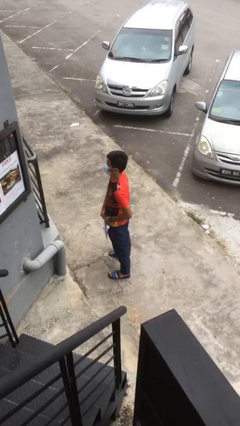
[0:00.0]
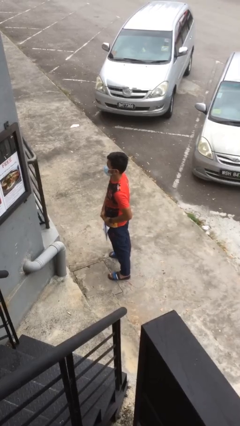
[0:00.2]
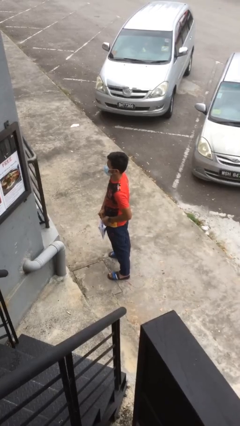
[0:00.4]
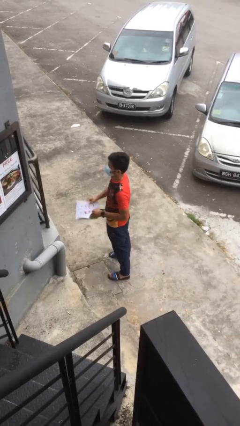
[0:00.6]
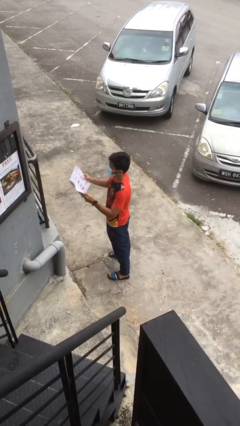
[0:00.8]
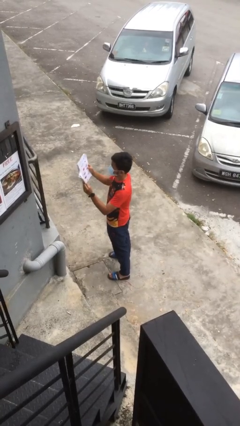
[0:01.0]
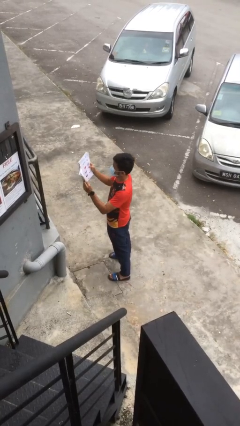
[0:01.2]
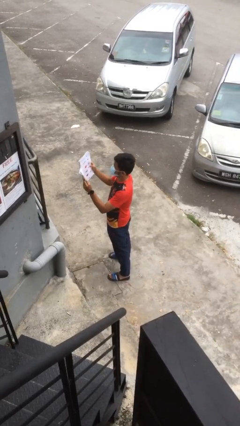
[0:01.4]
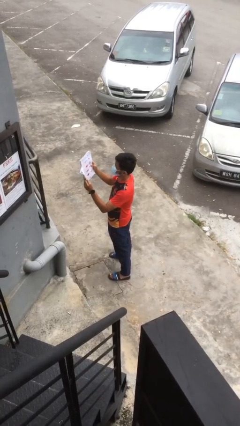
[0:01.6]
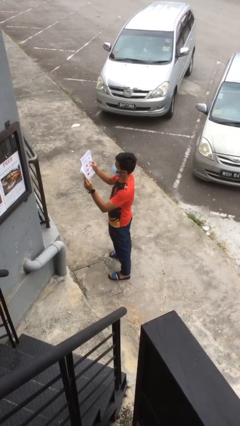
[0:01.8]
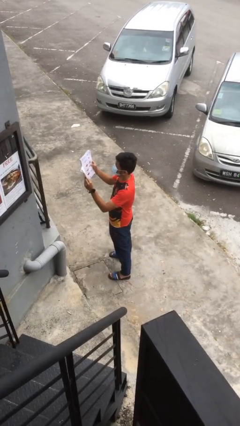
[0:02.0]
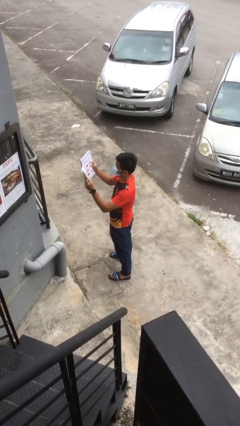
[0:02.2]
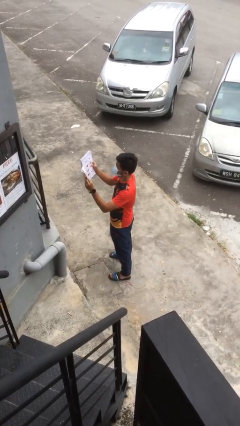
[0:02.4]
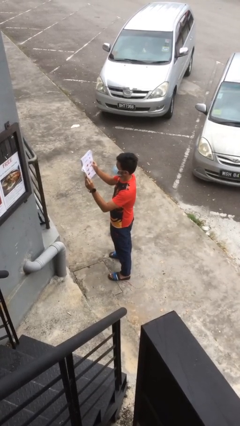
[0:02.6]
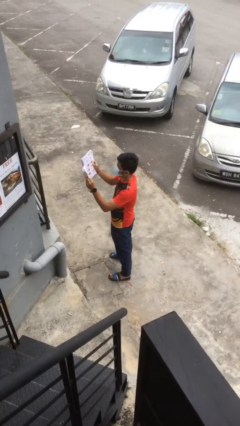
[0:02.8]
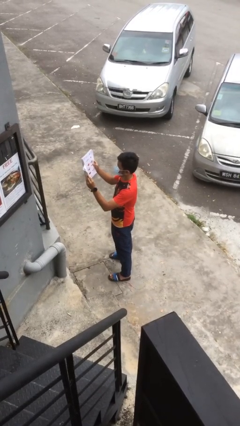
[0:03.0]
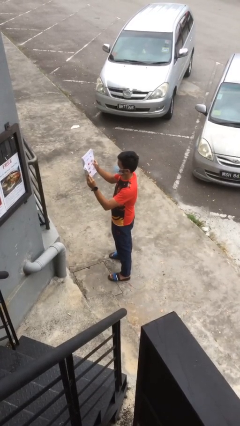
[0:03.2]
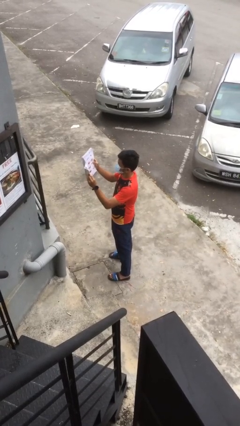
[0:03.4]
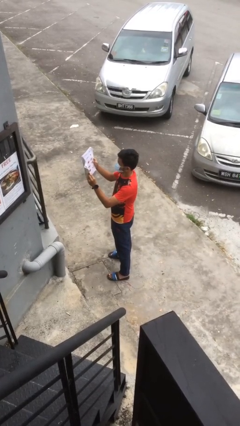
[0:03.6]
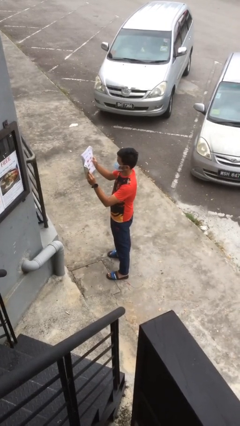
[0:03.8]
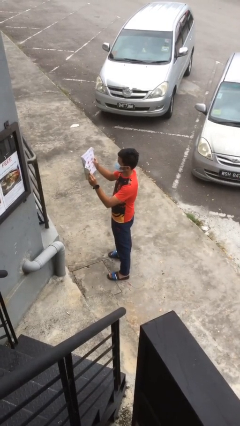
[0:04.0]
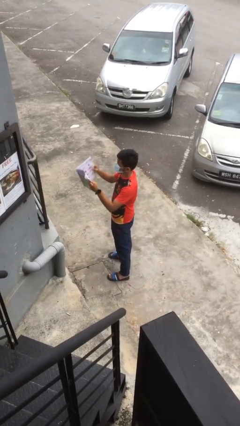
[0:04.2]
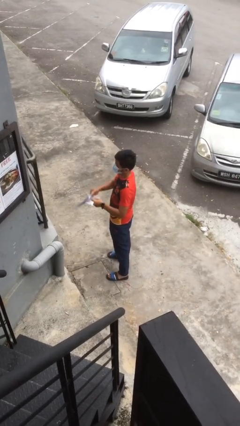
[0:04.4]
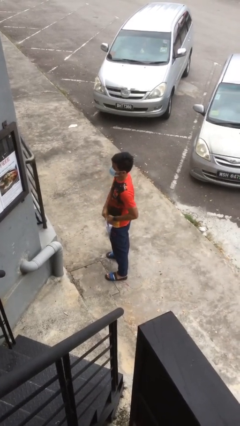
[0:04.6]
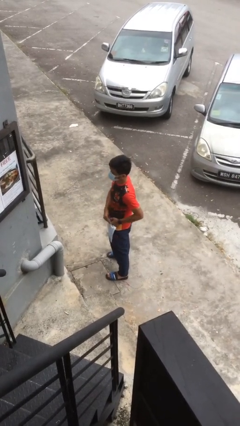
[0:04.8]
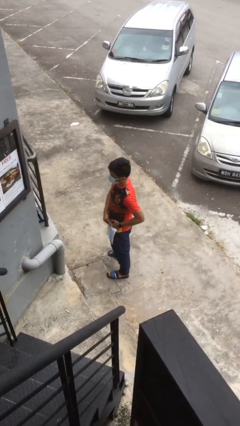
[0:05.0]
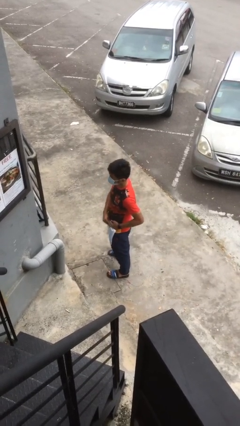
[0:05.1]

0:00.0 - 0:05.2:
person reads document

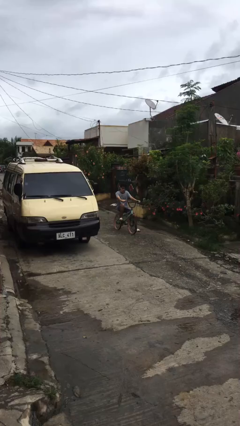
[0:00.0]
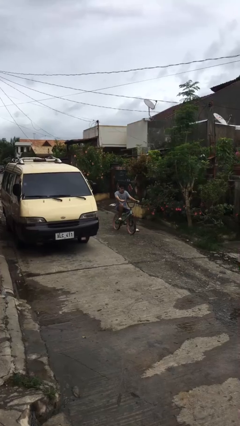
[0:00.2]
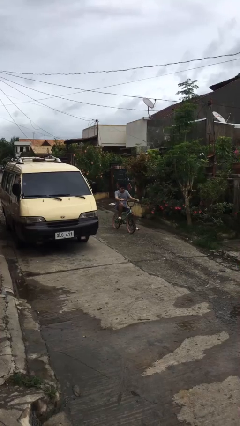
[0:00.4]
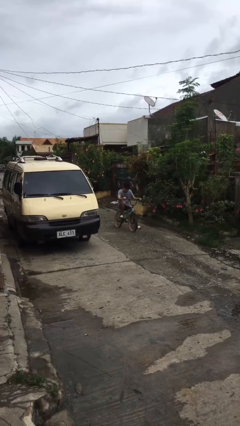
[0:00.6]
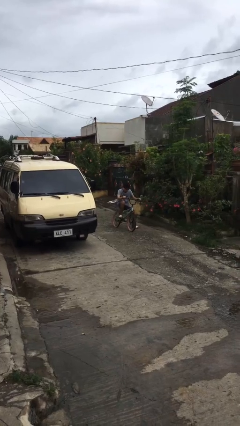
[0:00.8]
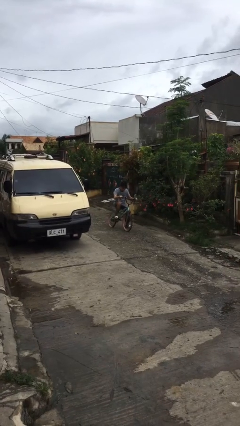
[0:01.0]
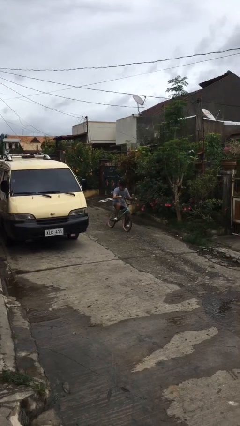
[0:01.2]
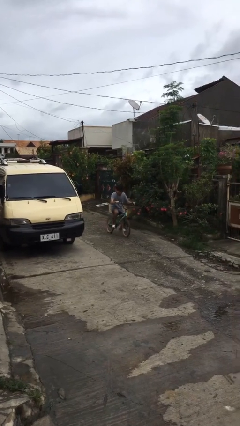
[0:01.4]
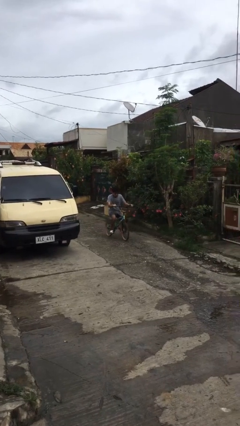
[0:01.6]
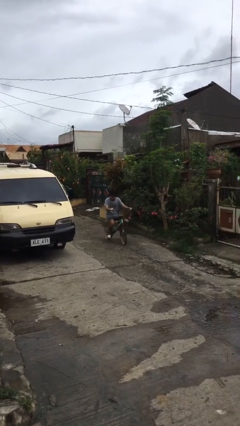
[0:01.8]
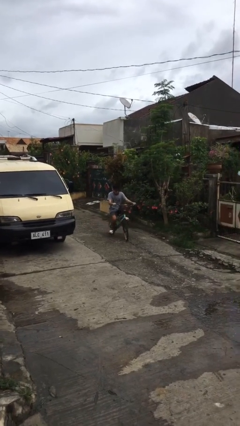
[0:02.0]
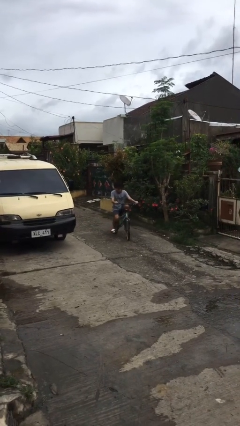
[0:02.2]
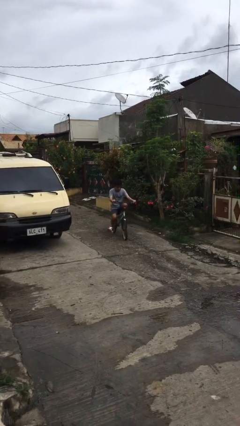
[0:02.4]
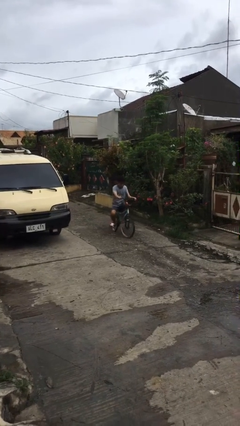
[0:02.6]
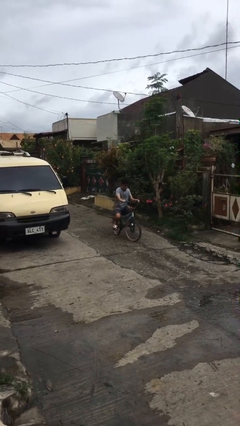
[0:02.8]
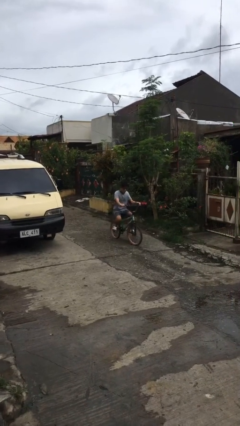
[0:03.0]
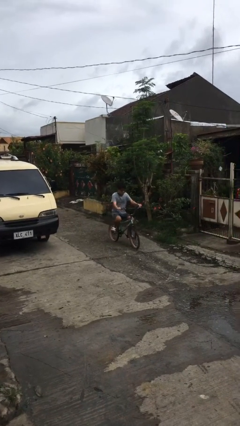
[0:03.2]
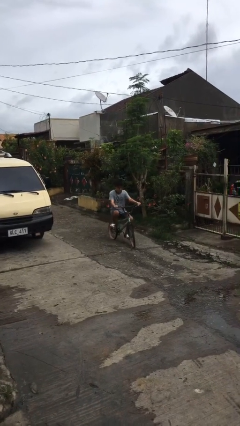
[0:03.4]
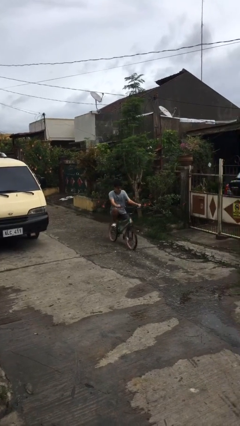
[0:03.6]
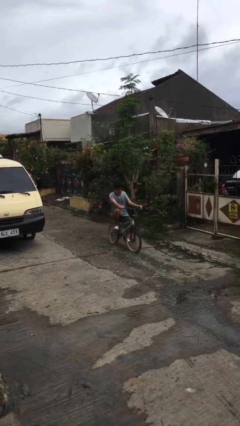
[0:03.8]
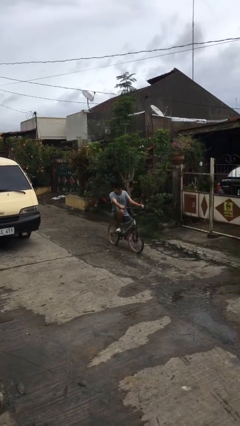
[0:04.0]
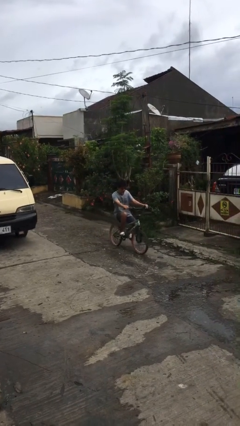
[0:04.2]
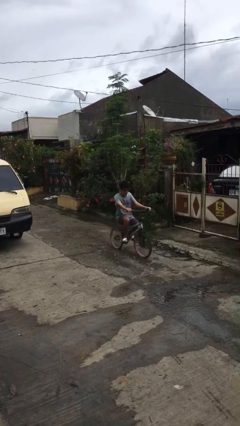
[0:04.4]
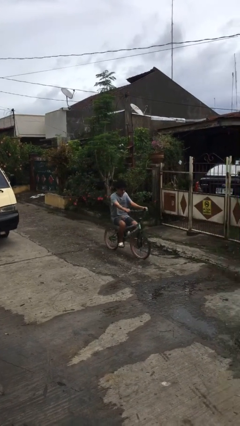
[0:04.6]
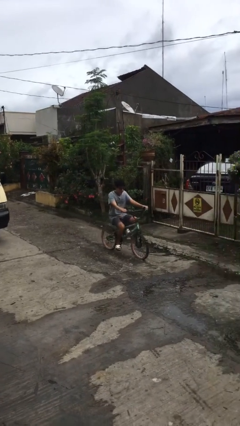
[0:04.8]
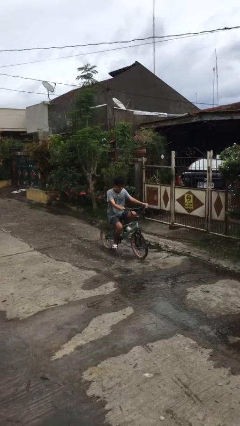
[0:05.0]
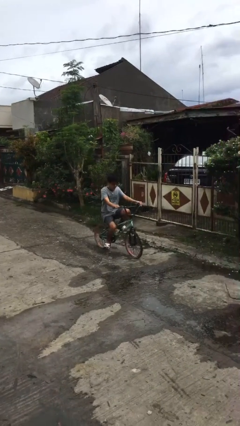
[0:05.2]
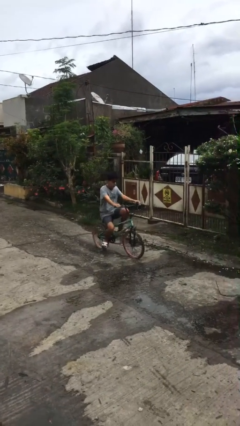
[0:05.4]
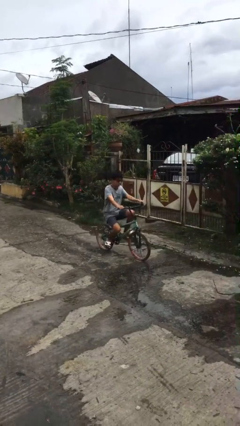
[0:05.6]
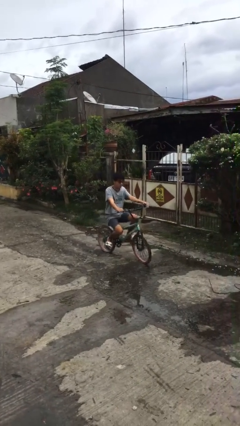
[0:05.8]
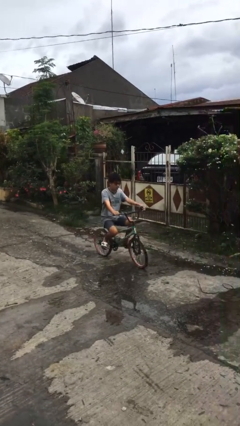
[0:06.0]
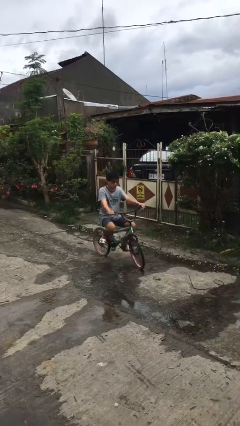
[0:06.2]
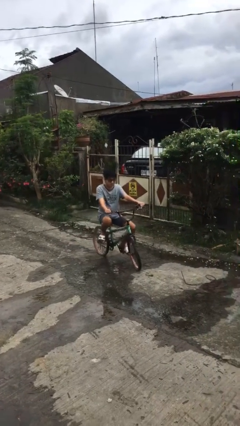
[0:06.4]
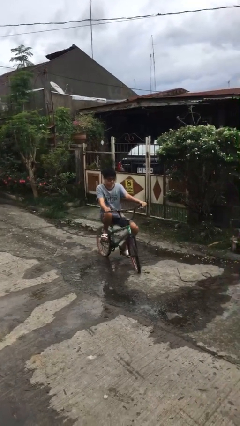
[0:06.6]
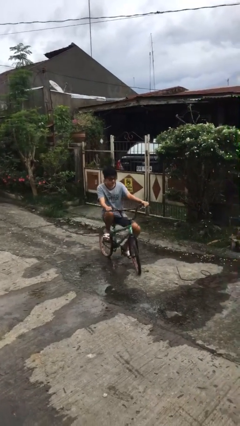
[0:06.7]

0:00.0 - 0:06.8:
person rides bicycle

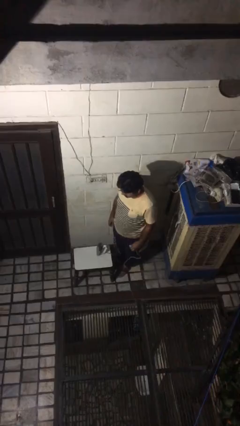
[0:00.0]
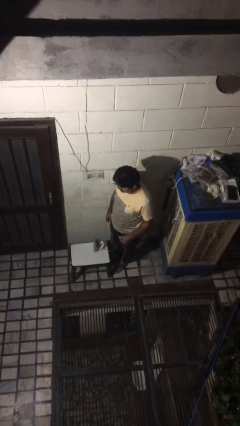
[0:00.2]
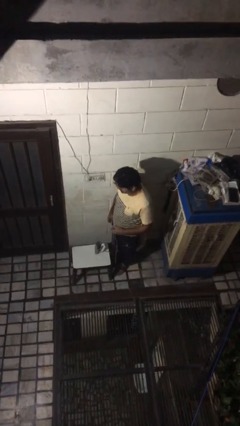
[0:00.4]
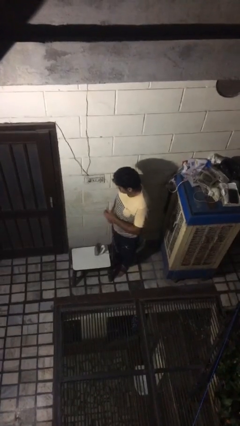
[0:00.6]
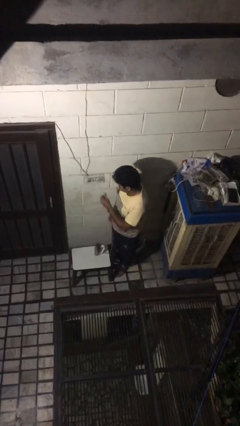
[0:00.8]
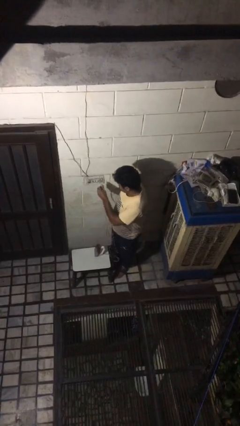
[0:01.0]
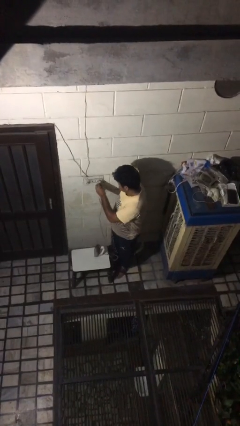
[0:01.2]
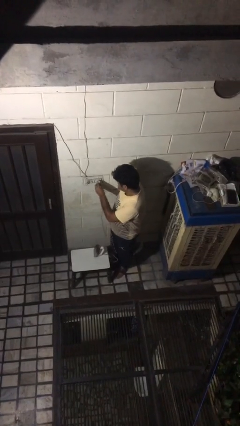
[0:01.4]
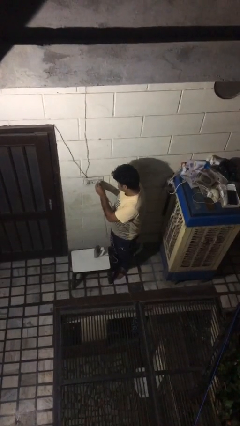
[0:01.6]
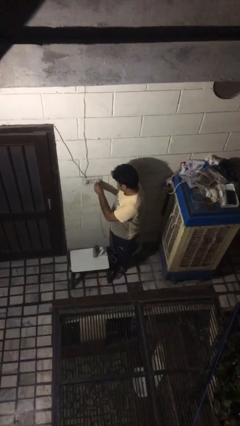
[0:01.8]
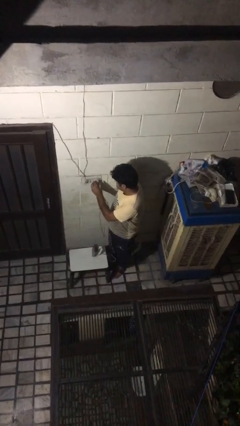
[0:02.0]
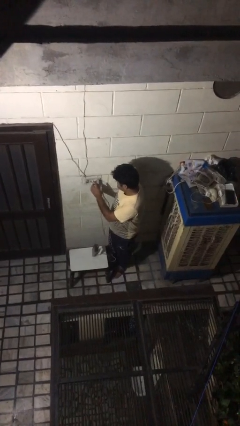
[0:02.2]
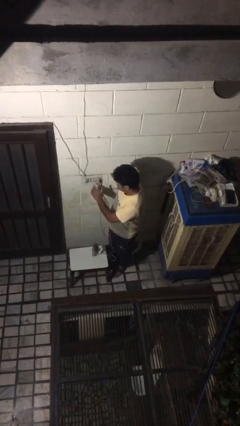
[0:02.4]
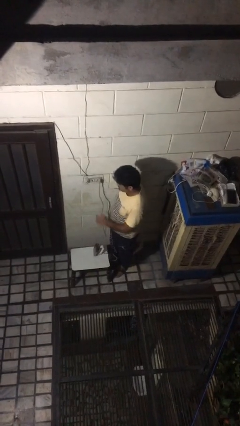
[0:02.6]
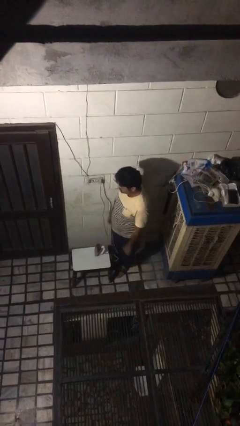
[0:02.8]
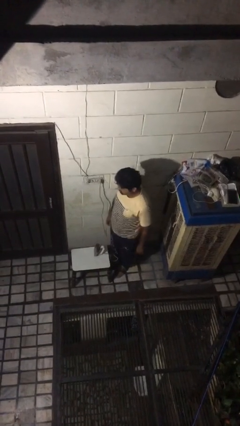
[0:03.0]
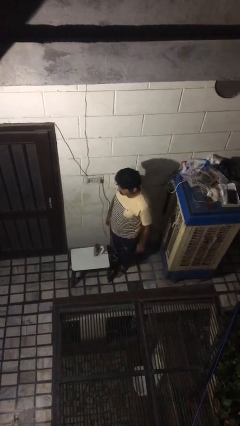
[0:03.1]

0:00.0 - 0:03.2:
person plugs into electrical socket

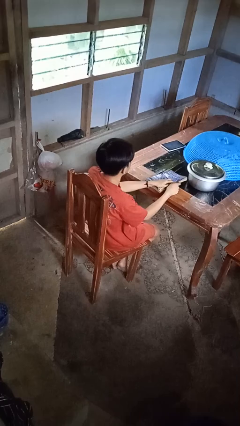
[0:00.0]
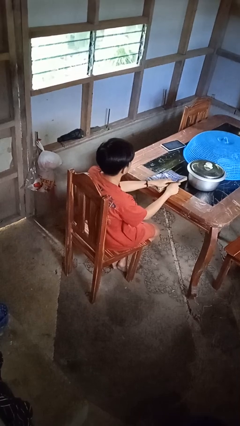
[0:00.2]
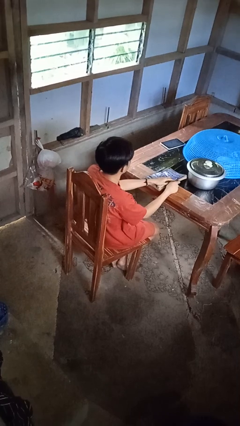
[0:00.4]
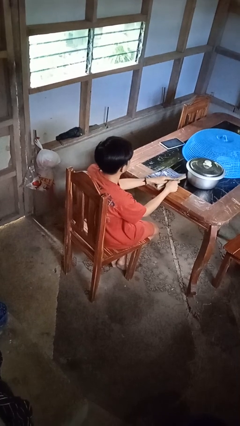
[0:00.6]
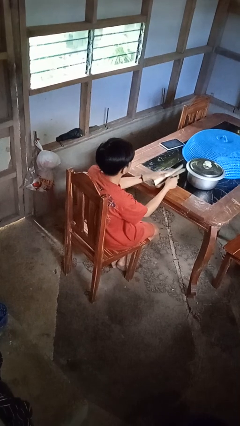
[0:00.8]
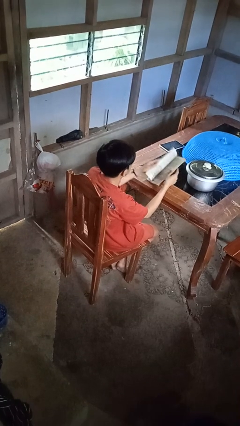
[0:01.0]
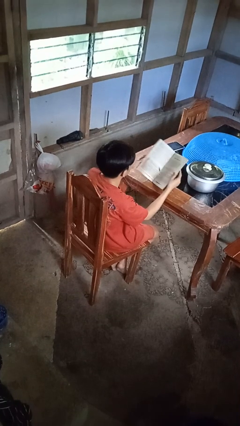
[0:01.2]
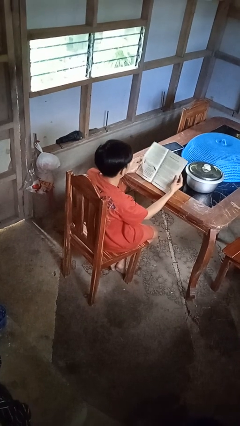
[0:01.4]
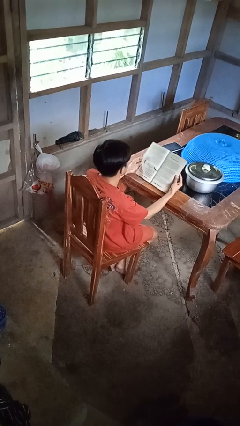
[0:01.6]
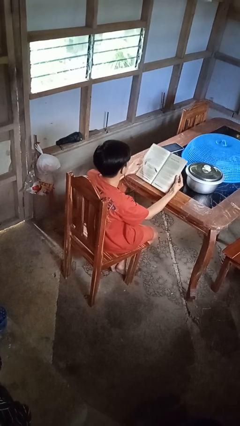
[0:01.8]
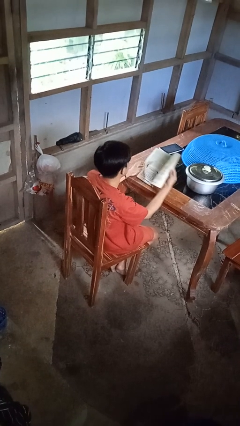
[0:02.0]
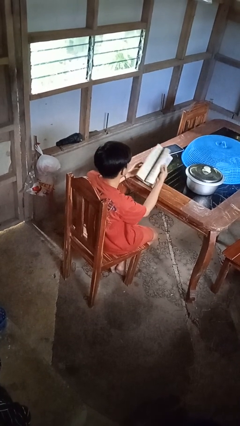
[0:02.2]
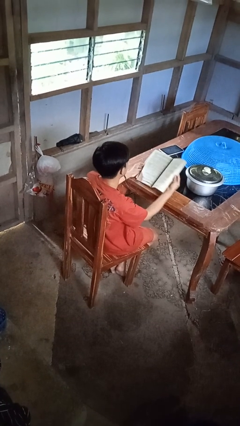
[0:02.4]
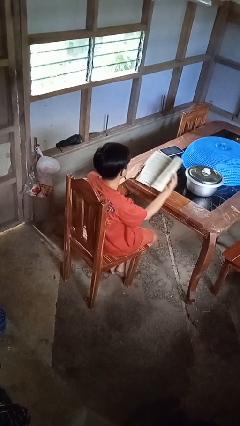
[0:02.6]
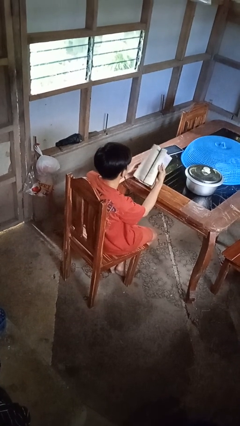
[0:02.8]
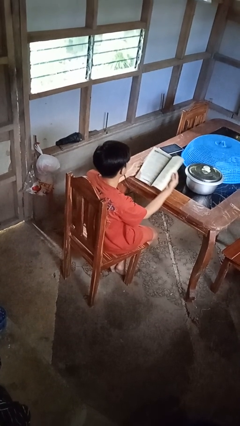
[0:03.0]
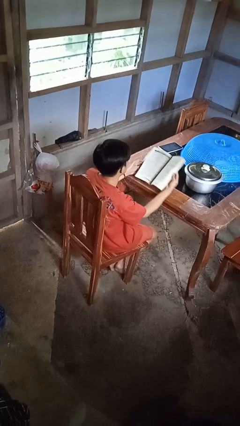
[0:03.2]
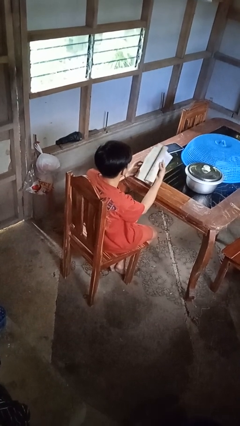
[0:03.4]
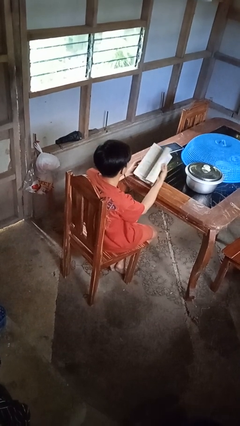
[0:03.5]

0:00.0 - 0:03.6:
person reads book
